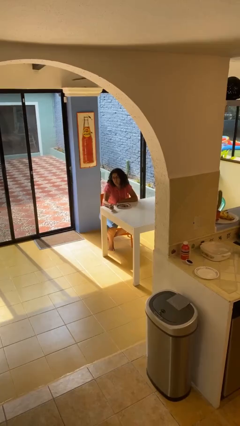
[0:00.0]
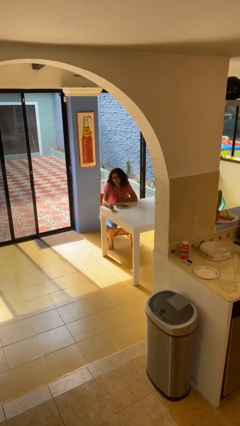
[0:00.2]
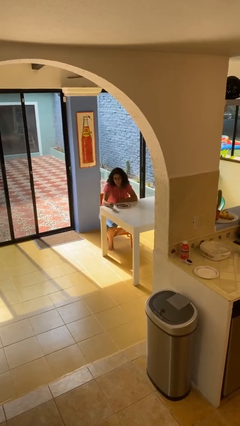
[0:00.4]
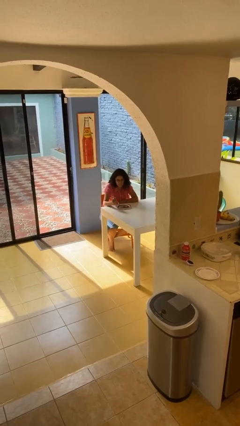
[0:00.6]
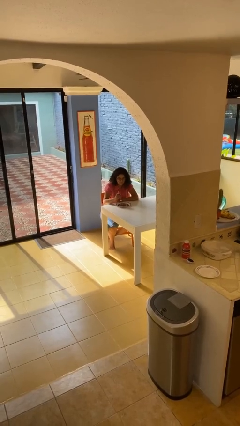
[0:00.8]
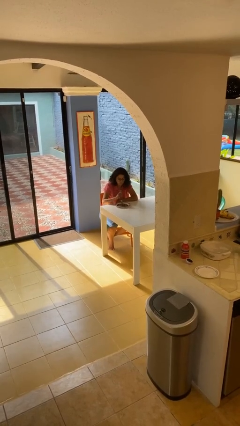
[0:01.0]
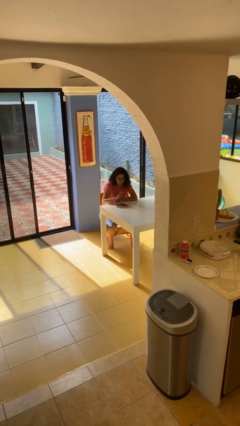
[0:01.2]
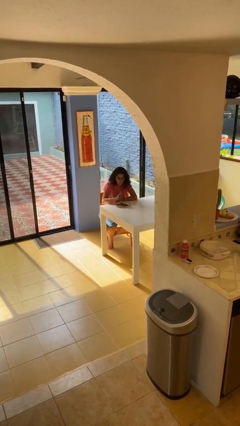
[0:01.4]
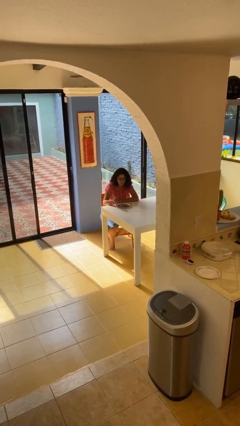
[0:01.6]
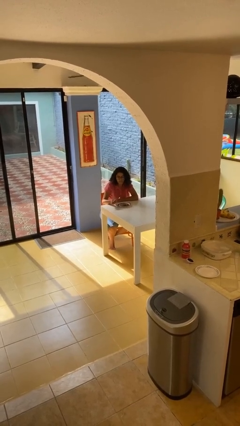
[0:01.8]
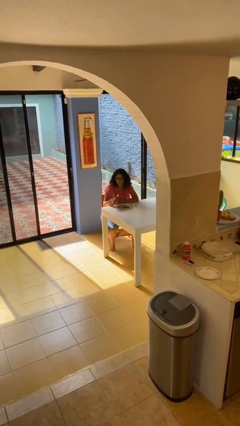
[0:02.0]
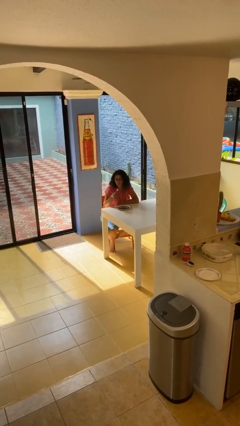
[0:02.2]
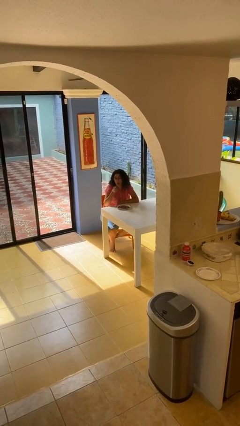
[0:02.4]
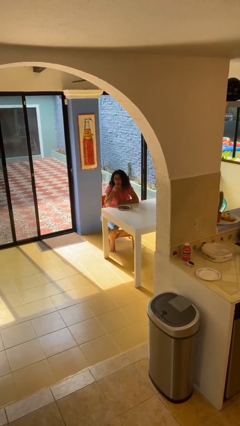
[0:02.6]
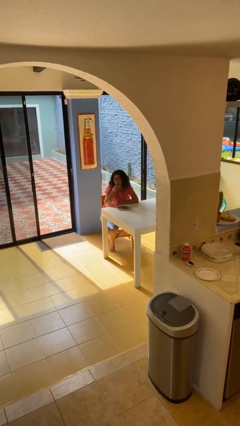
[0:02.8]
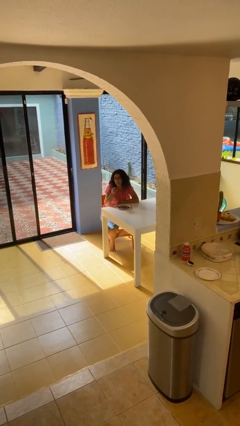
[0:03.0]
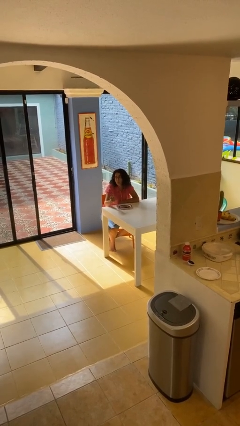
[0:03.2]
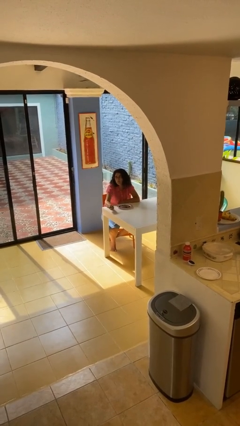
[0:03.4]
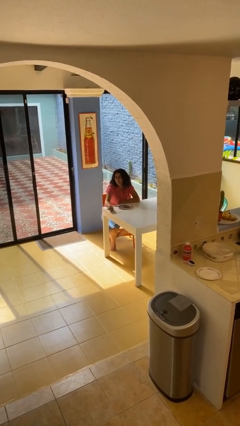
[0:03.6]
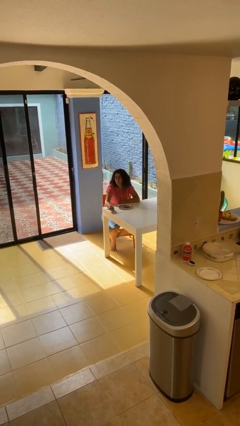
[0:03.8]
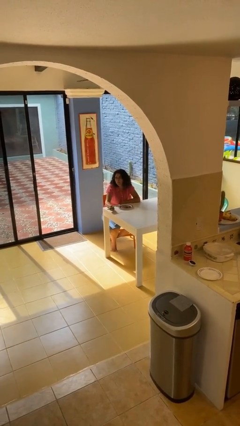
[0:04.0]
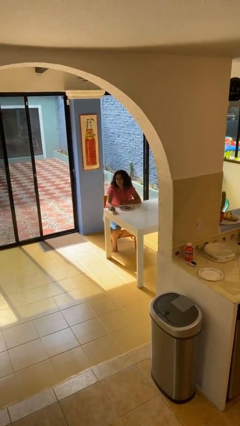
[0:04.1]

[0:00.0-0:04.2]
person eats with utensil

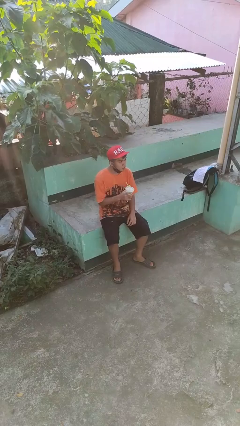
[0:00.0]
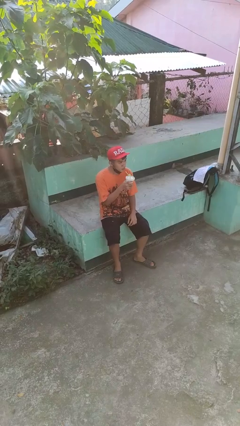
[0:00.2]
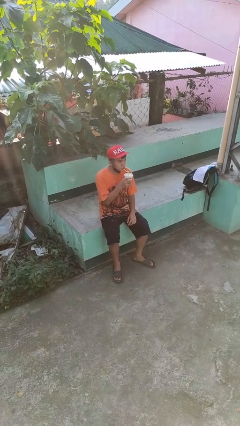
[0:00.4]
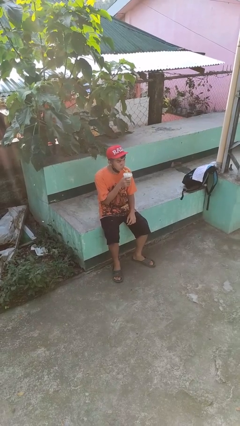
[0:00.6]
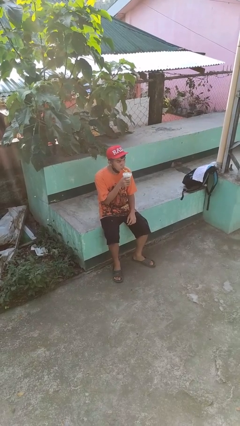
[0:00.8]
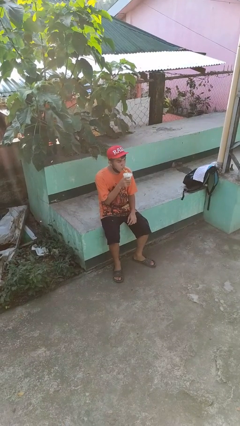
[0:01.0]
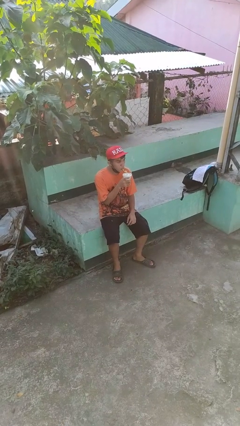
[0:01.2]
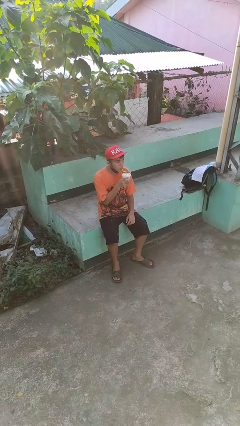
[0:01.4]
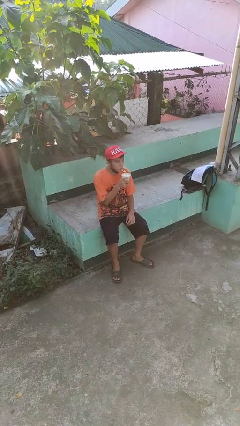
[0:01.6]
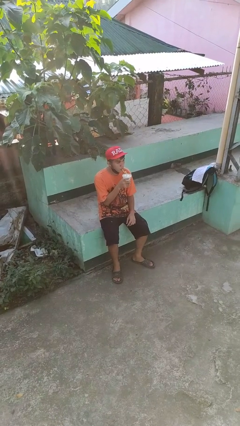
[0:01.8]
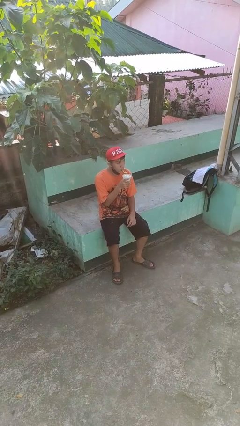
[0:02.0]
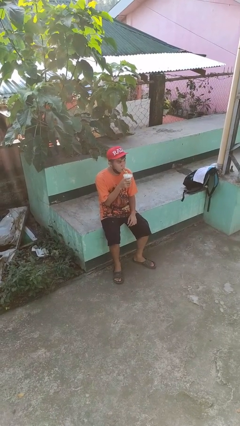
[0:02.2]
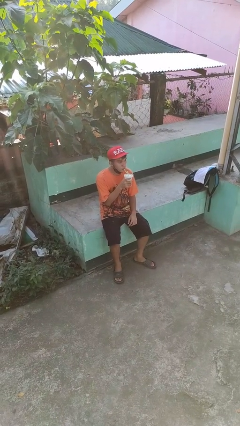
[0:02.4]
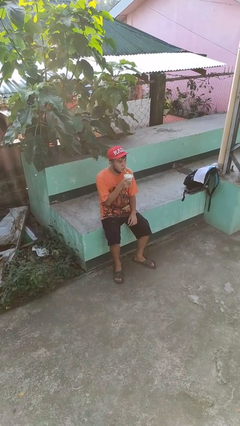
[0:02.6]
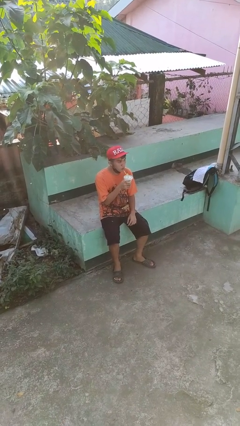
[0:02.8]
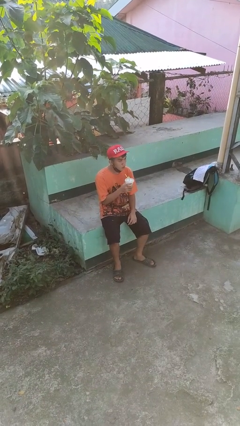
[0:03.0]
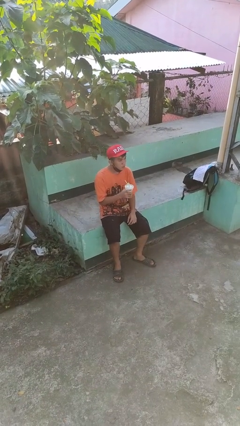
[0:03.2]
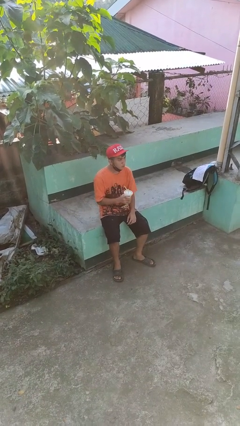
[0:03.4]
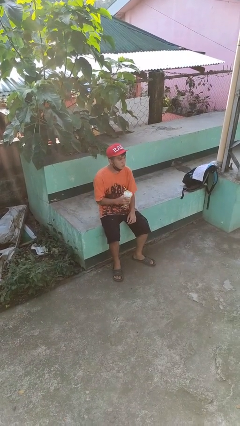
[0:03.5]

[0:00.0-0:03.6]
person drinks from straw

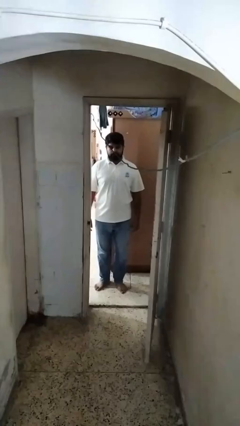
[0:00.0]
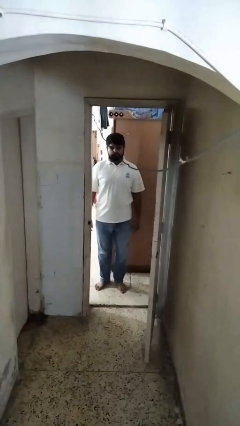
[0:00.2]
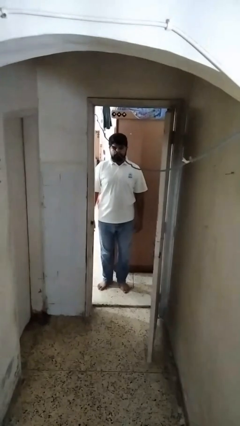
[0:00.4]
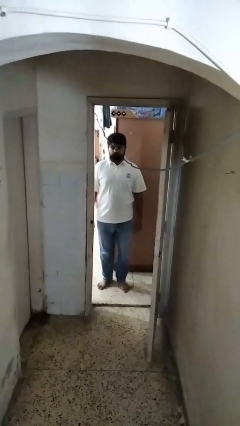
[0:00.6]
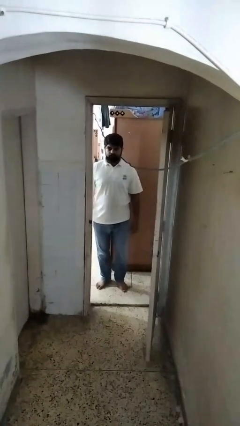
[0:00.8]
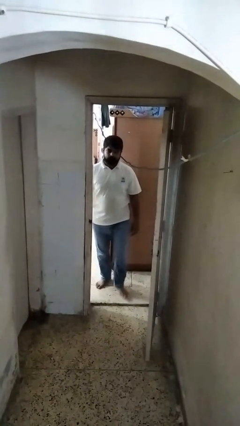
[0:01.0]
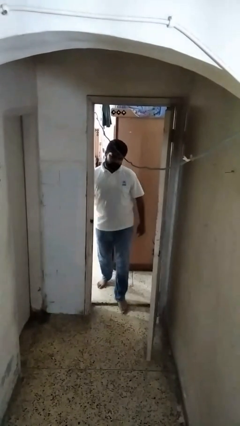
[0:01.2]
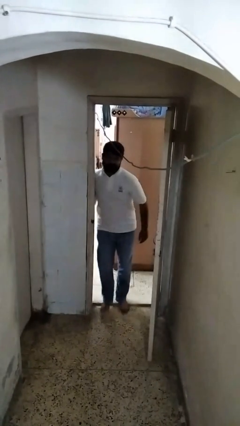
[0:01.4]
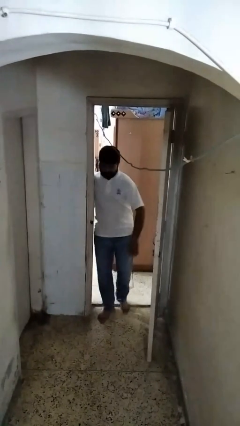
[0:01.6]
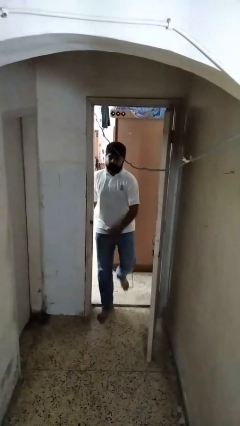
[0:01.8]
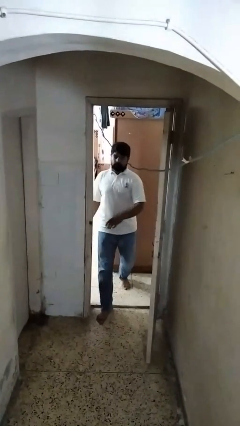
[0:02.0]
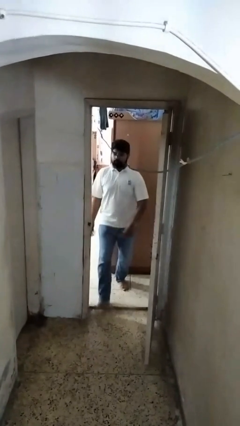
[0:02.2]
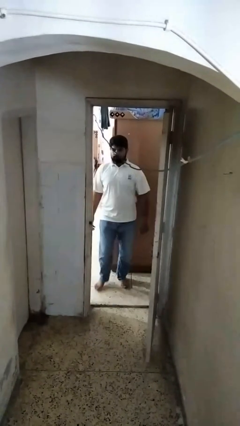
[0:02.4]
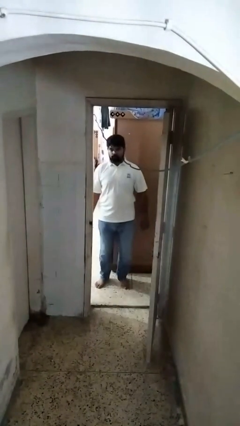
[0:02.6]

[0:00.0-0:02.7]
person bumps into wall

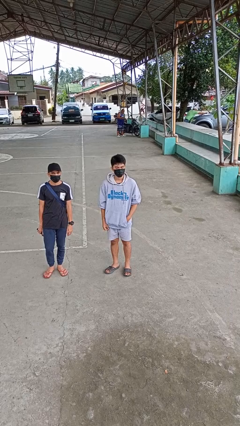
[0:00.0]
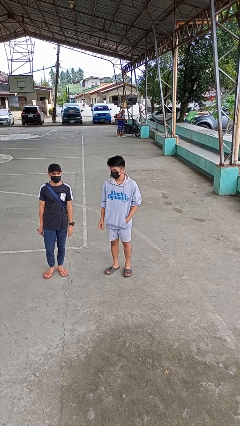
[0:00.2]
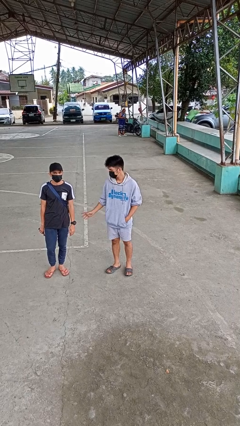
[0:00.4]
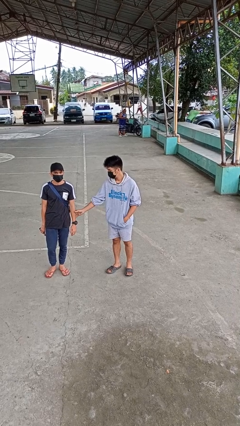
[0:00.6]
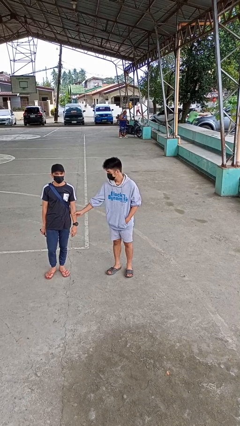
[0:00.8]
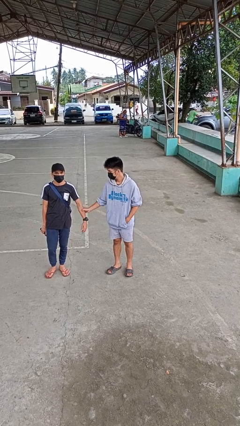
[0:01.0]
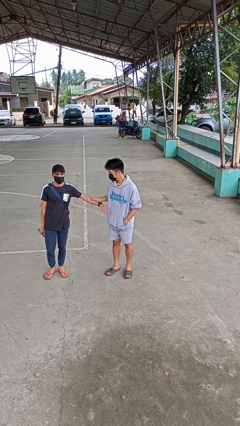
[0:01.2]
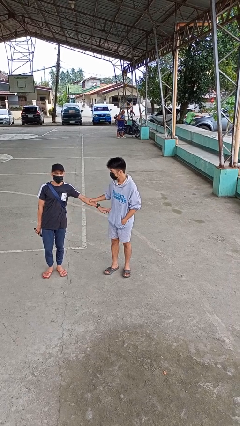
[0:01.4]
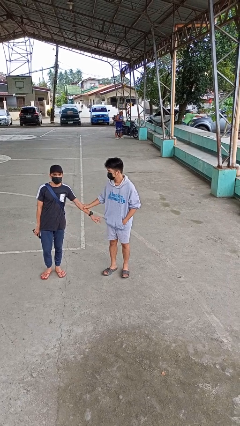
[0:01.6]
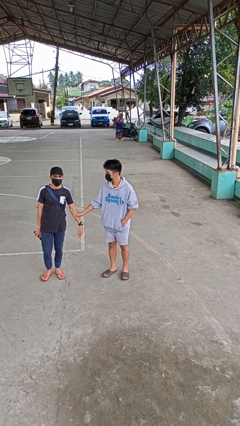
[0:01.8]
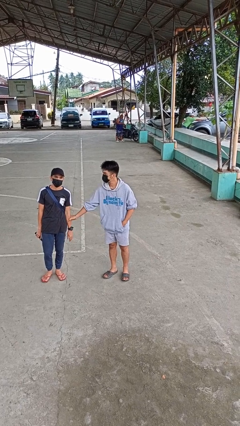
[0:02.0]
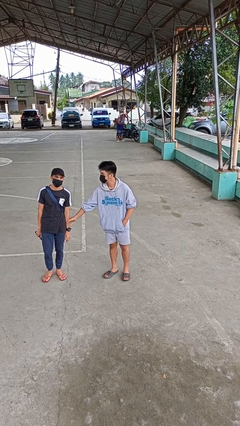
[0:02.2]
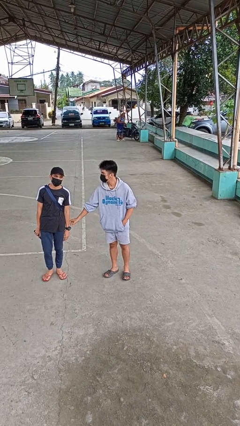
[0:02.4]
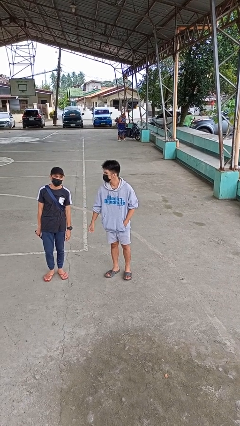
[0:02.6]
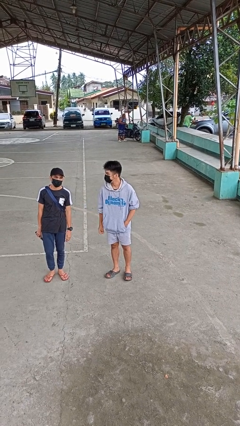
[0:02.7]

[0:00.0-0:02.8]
person grabs person by forearm

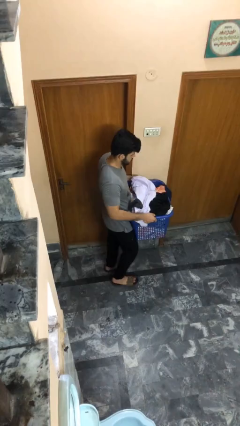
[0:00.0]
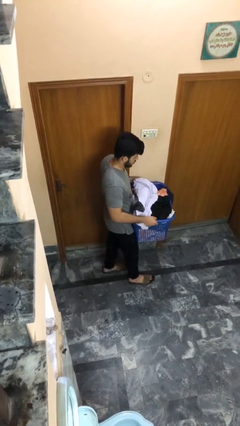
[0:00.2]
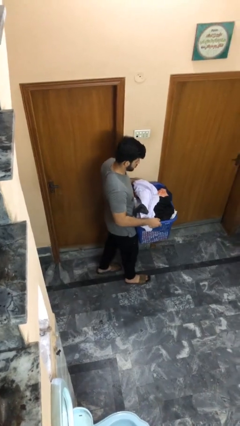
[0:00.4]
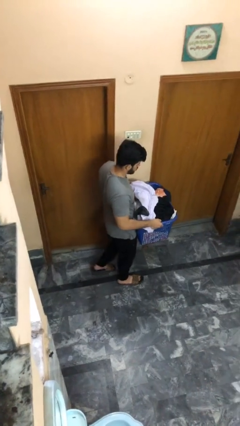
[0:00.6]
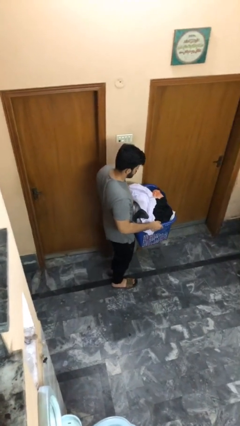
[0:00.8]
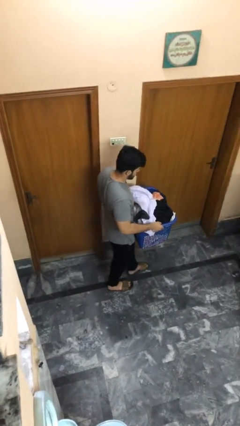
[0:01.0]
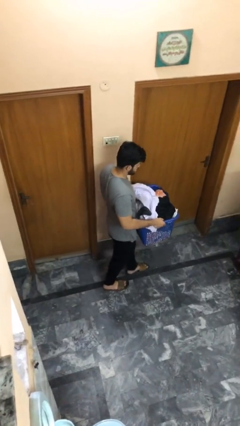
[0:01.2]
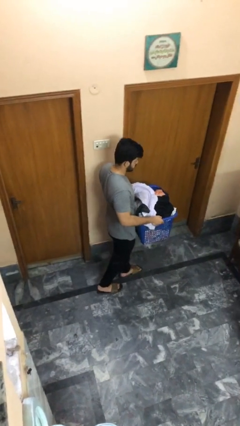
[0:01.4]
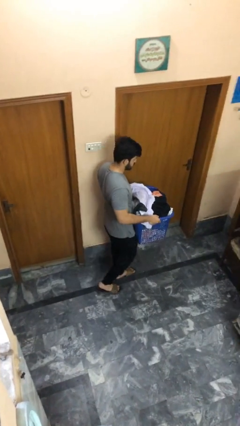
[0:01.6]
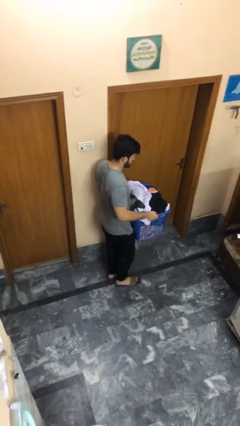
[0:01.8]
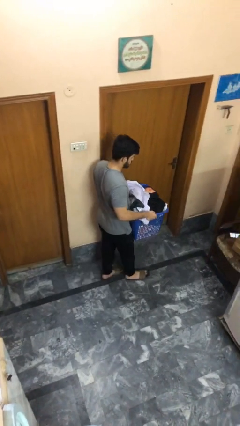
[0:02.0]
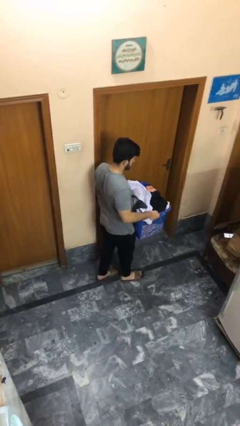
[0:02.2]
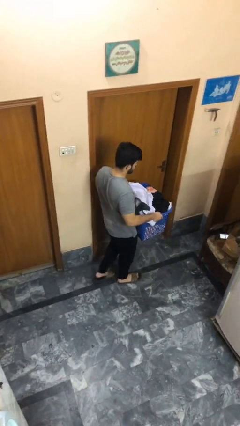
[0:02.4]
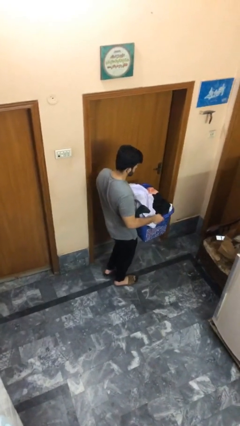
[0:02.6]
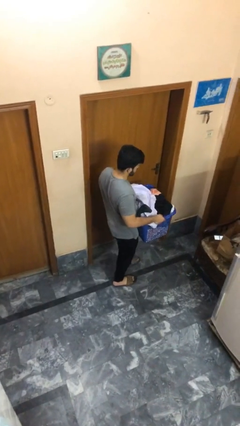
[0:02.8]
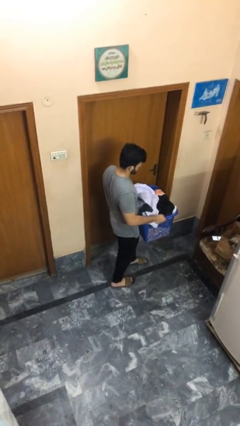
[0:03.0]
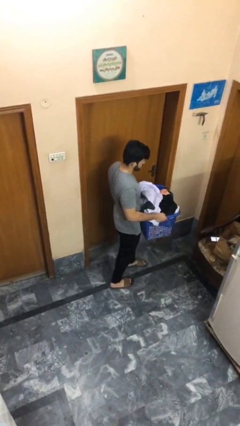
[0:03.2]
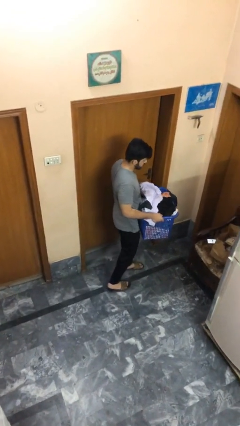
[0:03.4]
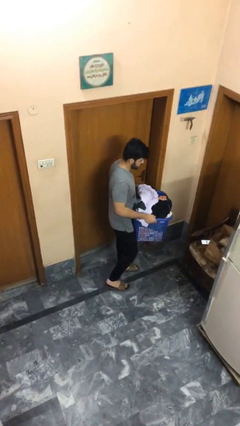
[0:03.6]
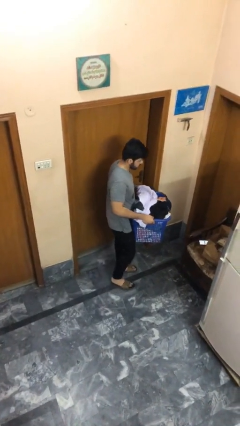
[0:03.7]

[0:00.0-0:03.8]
person carries laundry basket

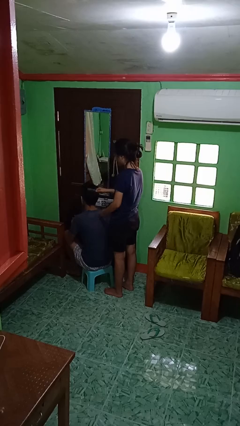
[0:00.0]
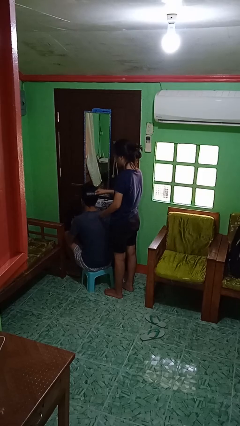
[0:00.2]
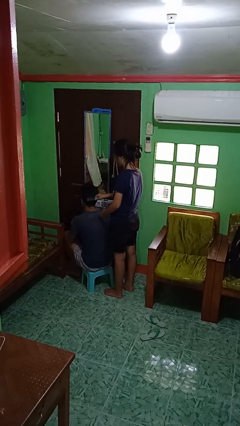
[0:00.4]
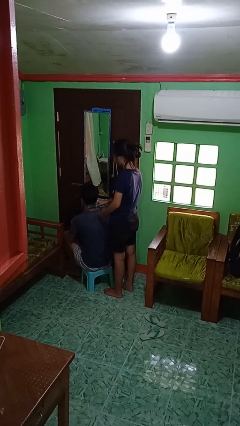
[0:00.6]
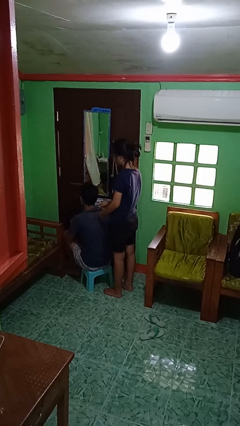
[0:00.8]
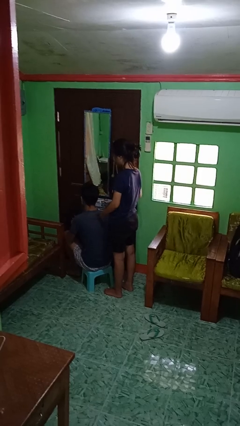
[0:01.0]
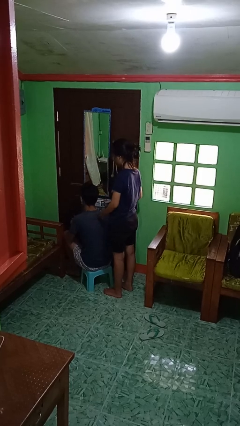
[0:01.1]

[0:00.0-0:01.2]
person brushes hair of person
